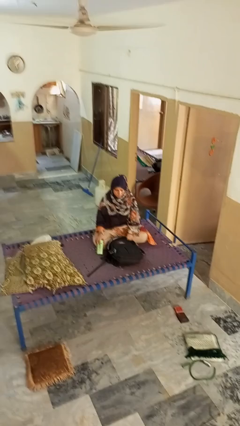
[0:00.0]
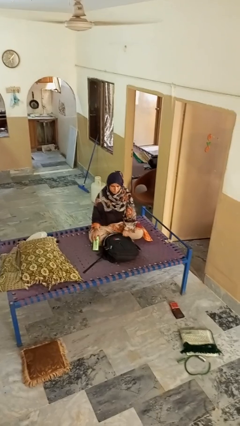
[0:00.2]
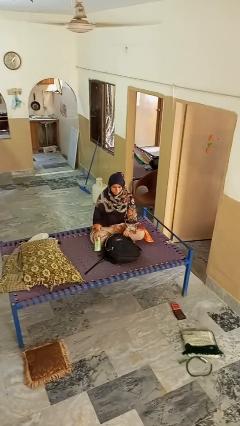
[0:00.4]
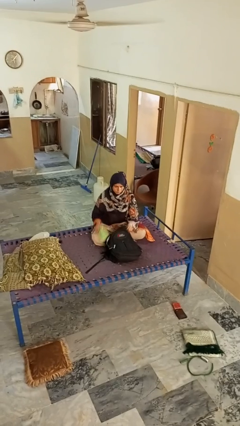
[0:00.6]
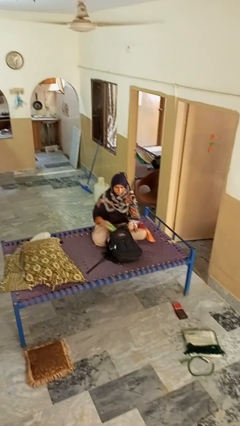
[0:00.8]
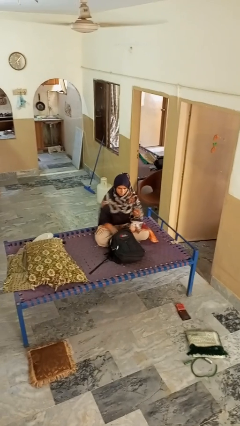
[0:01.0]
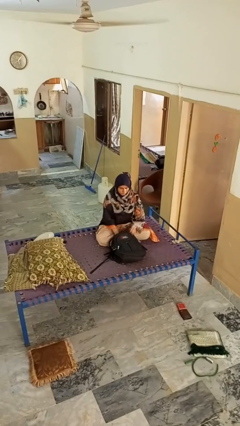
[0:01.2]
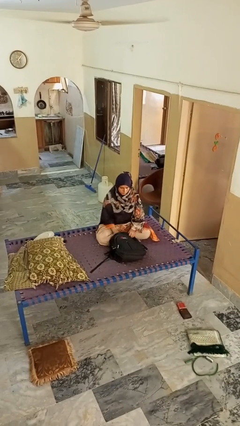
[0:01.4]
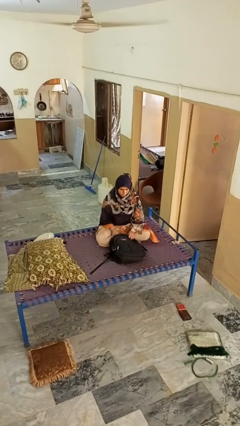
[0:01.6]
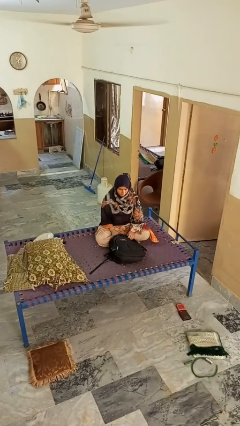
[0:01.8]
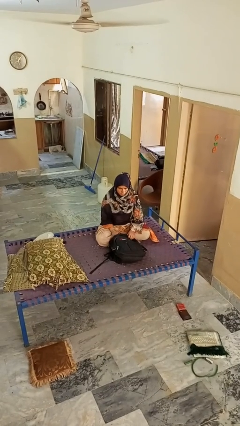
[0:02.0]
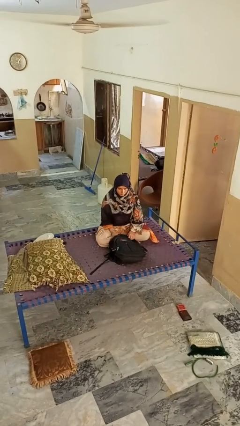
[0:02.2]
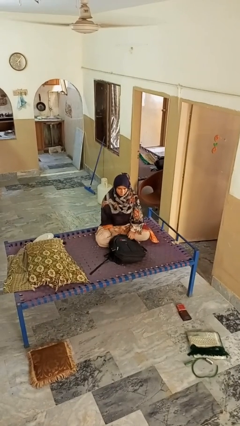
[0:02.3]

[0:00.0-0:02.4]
person puts object into bag

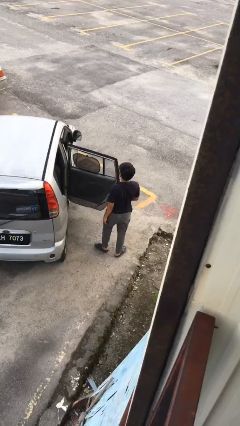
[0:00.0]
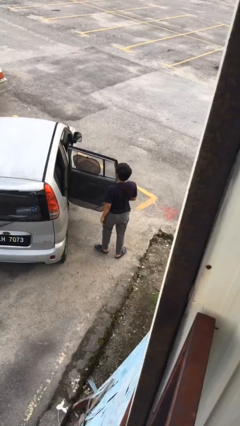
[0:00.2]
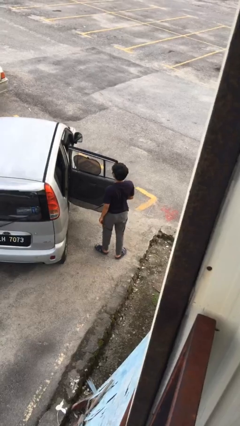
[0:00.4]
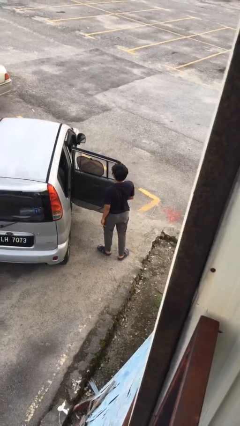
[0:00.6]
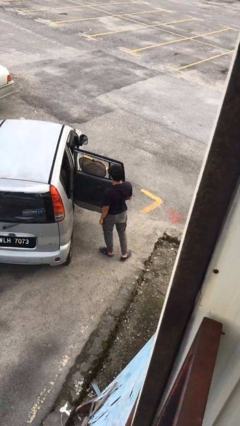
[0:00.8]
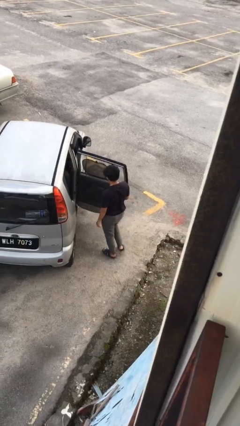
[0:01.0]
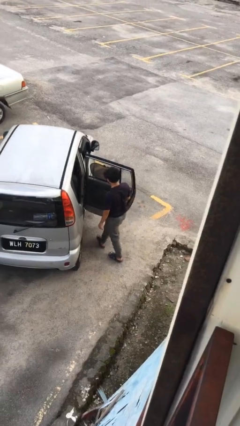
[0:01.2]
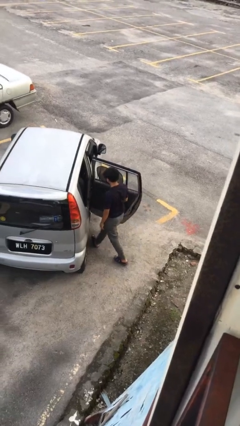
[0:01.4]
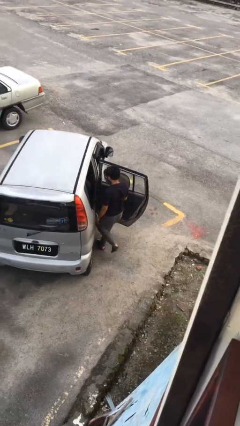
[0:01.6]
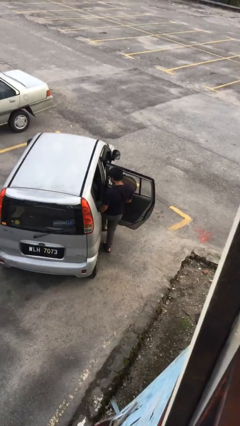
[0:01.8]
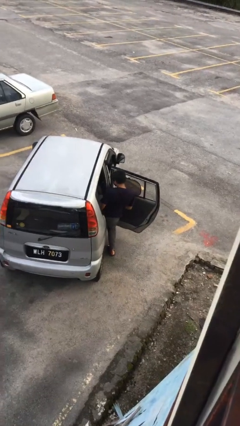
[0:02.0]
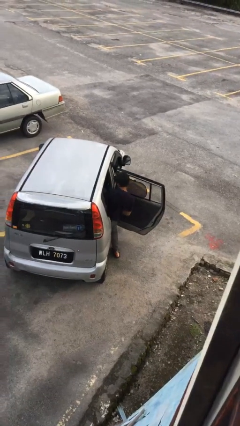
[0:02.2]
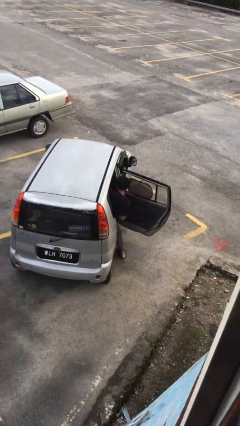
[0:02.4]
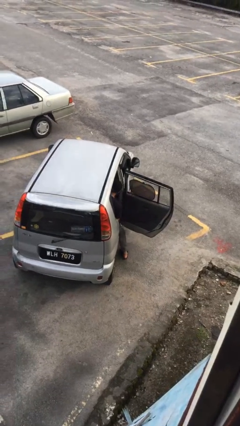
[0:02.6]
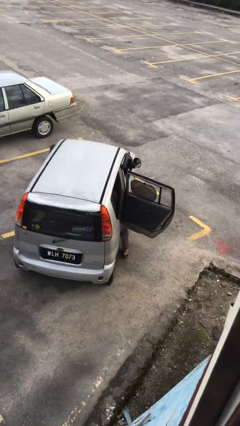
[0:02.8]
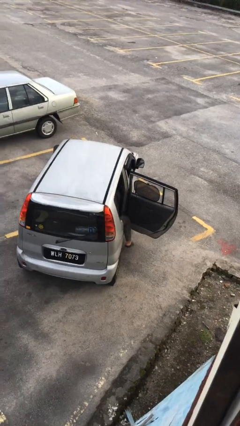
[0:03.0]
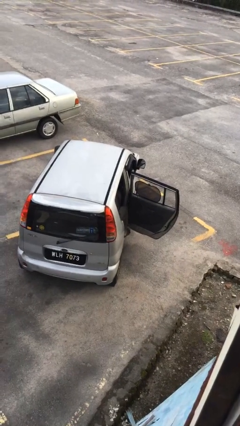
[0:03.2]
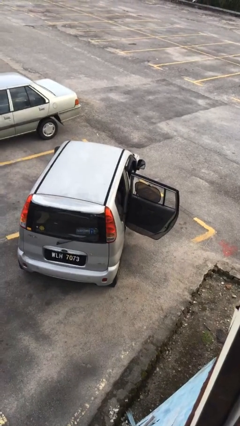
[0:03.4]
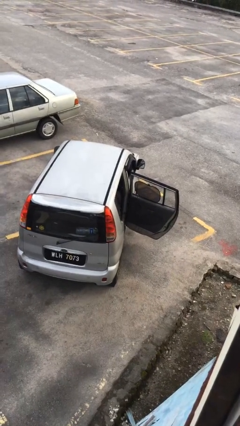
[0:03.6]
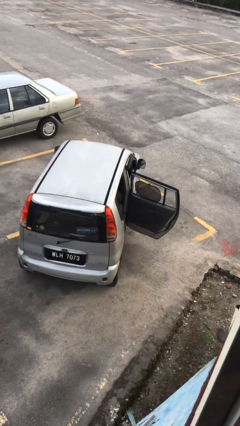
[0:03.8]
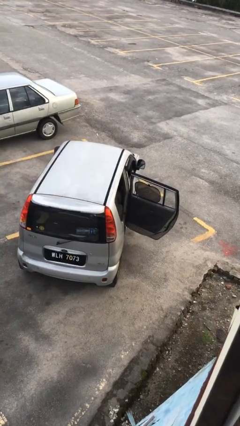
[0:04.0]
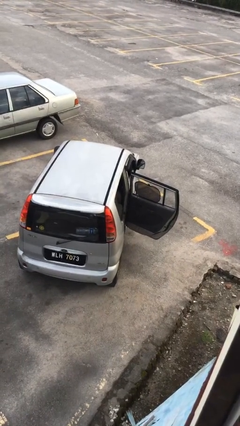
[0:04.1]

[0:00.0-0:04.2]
person enters car

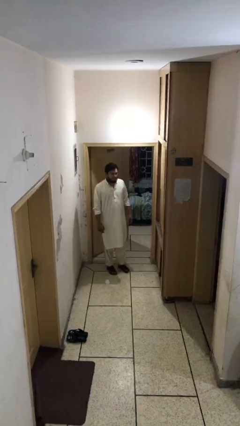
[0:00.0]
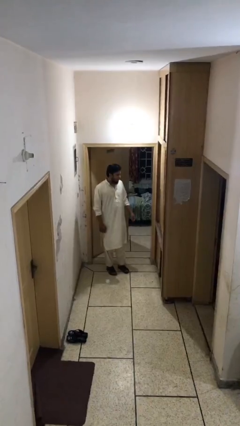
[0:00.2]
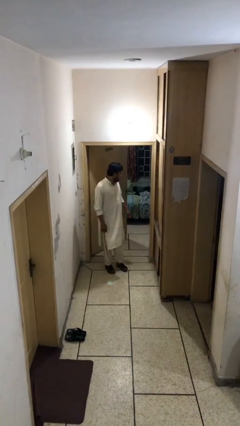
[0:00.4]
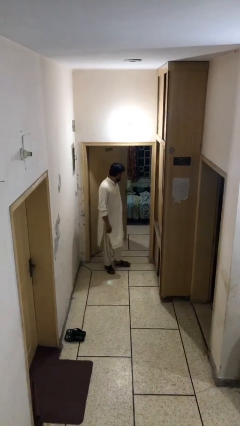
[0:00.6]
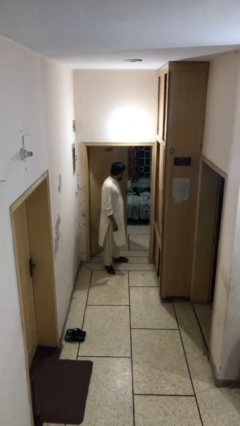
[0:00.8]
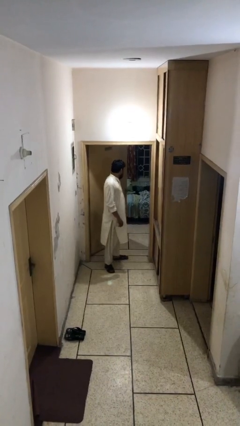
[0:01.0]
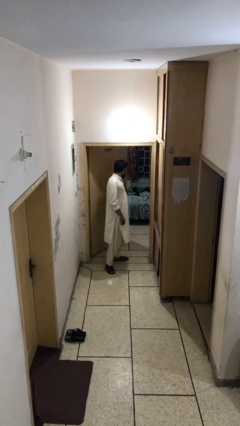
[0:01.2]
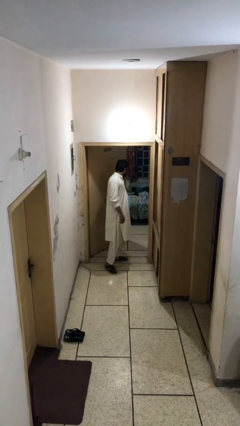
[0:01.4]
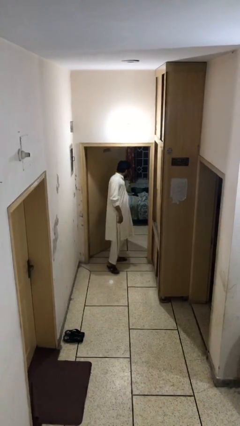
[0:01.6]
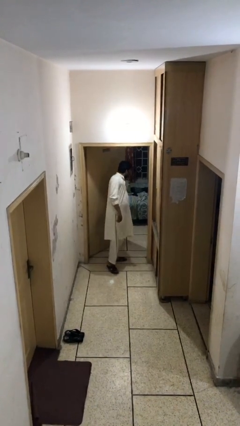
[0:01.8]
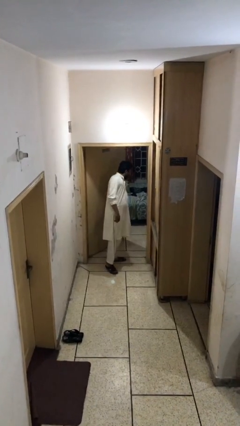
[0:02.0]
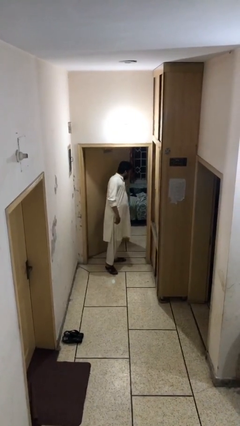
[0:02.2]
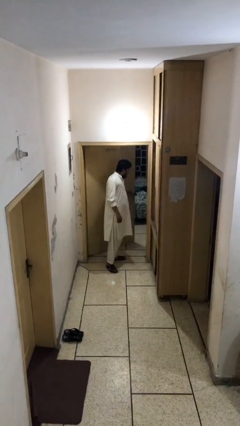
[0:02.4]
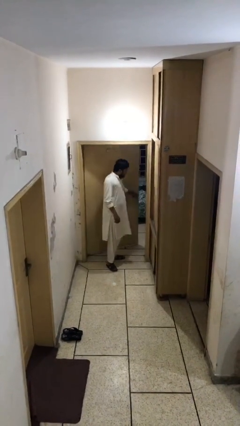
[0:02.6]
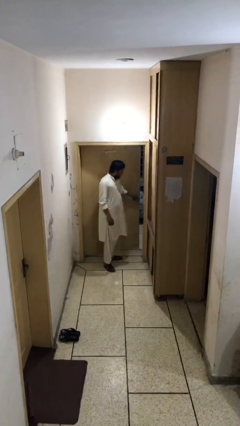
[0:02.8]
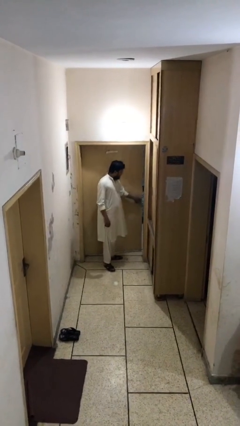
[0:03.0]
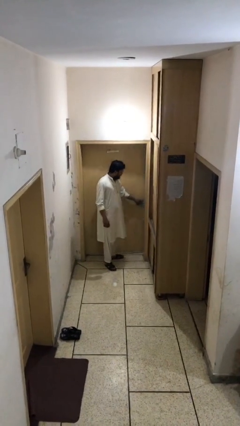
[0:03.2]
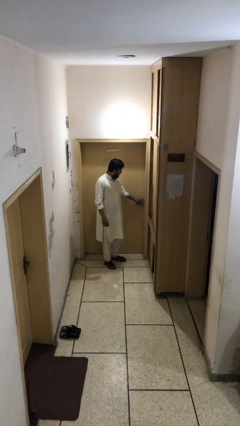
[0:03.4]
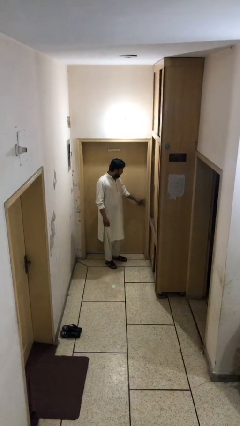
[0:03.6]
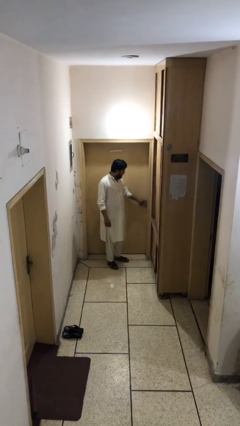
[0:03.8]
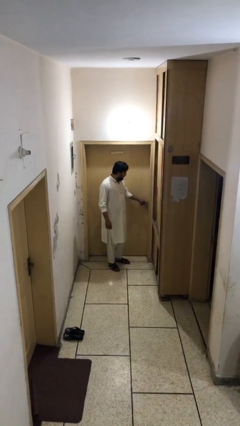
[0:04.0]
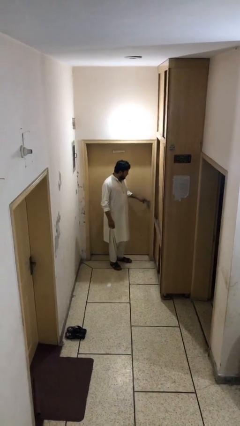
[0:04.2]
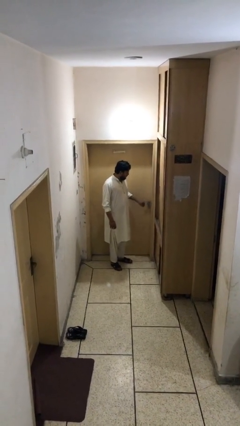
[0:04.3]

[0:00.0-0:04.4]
person closes facility door

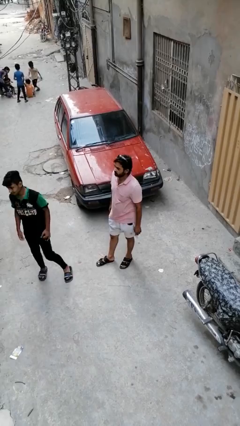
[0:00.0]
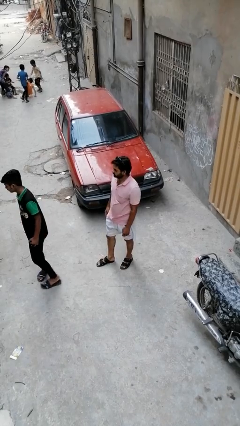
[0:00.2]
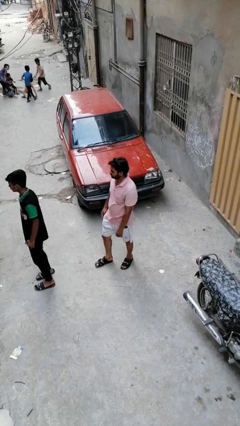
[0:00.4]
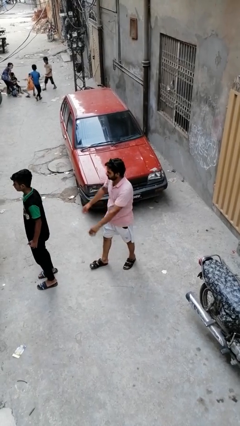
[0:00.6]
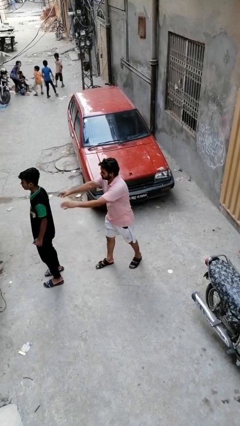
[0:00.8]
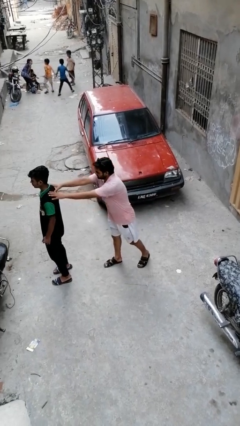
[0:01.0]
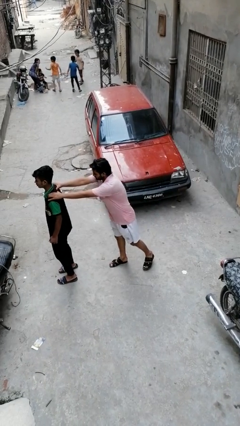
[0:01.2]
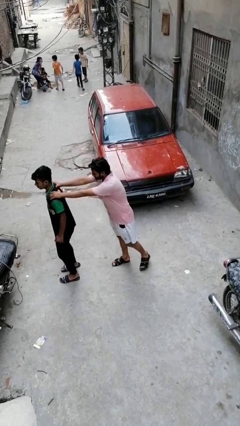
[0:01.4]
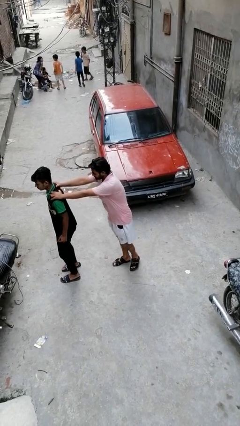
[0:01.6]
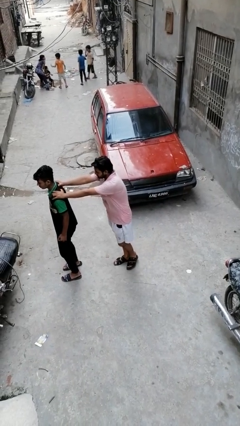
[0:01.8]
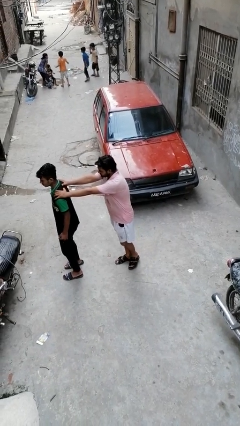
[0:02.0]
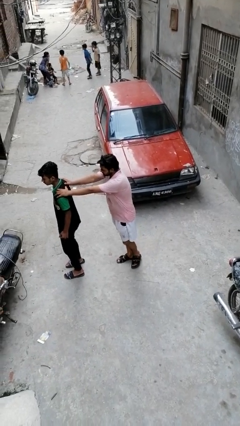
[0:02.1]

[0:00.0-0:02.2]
person grabs person by shoulder

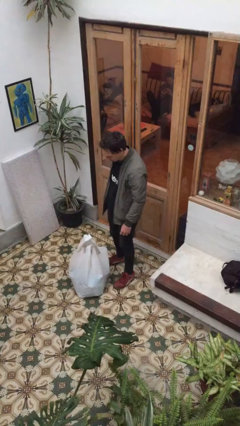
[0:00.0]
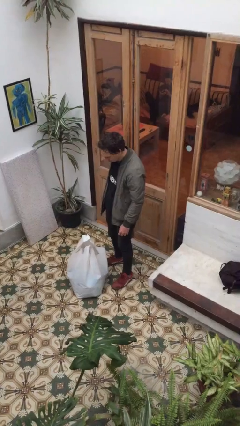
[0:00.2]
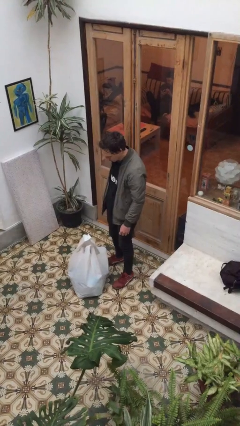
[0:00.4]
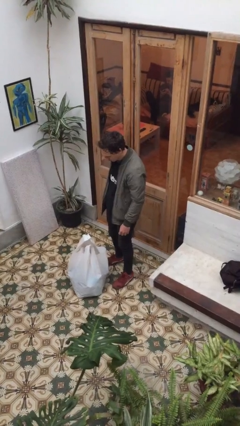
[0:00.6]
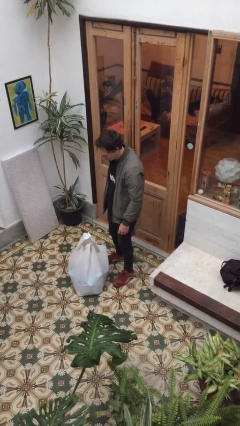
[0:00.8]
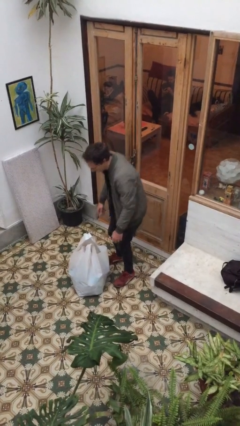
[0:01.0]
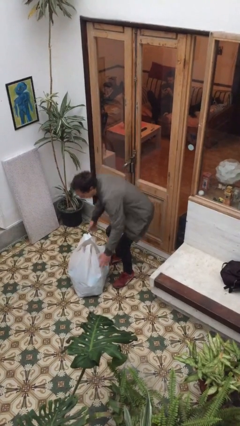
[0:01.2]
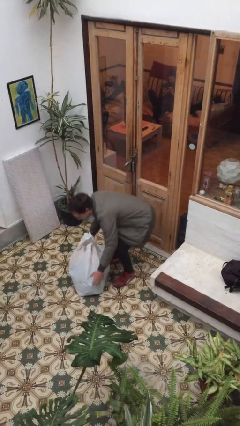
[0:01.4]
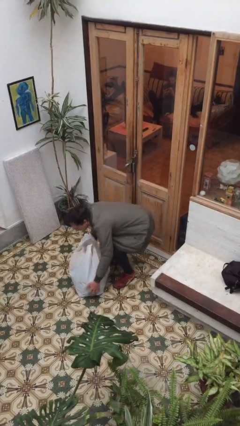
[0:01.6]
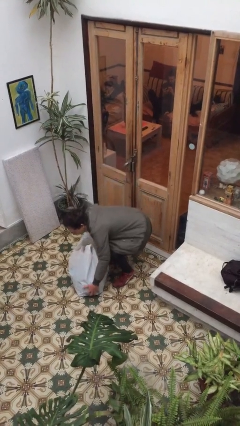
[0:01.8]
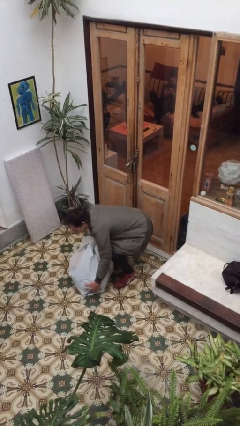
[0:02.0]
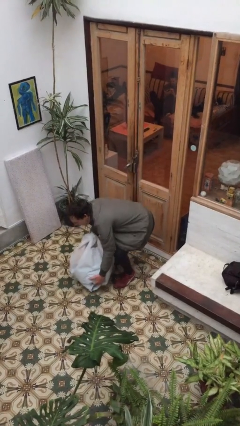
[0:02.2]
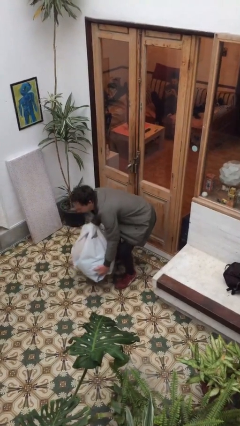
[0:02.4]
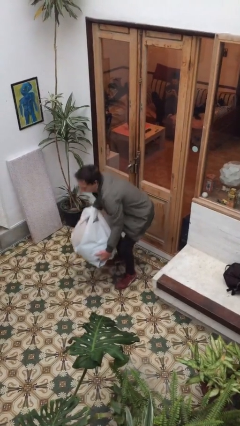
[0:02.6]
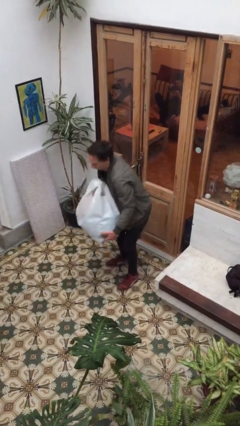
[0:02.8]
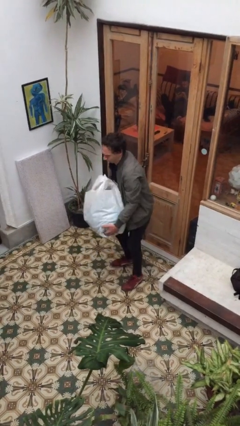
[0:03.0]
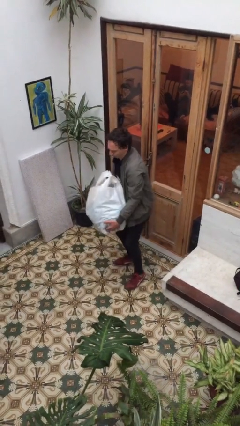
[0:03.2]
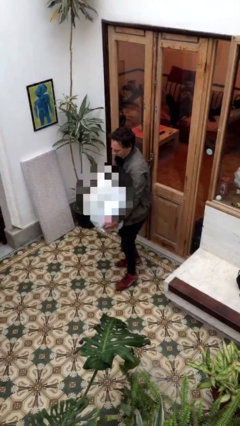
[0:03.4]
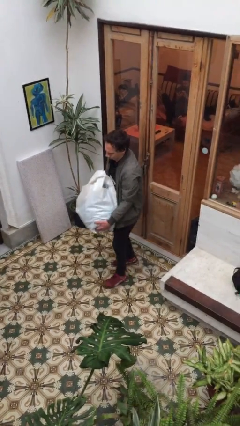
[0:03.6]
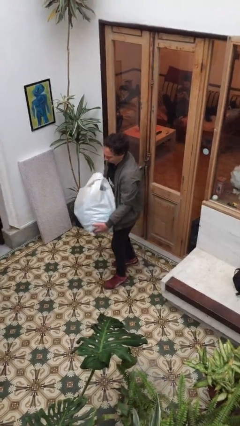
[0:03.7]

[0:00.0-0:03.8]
person picks up object from floor

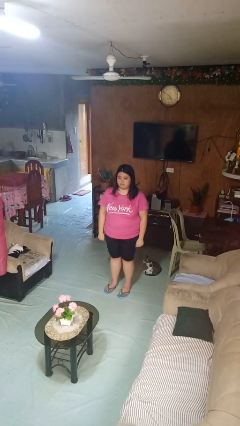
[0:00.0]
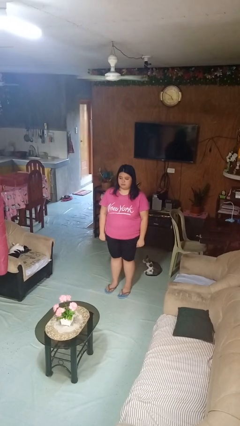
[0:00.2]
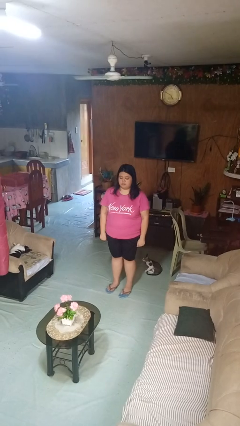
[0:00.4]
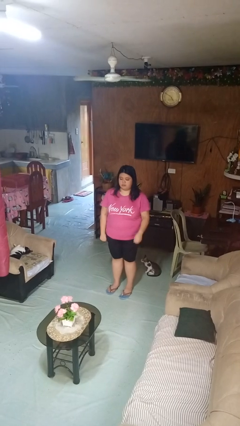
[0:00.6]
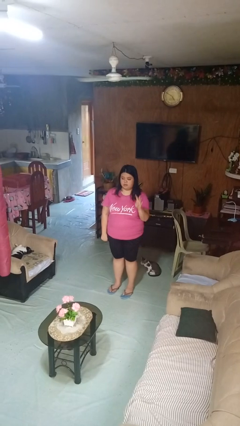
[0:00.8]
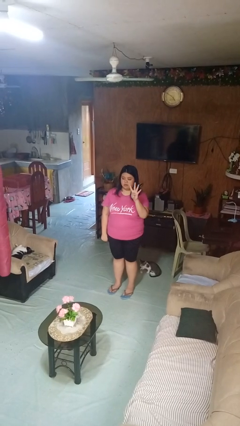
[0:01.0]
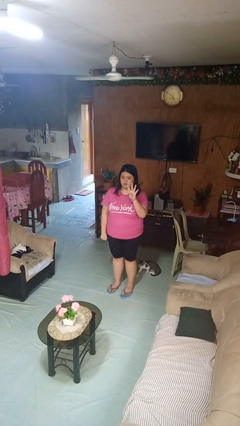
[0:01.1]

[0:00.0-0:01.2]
person gestures number four
